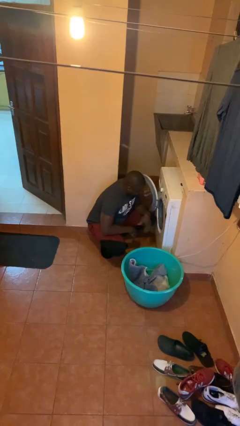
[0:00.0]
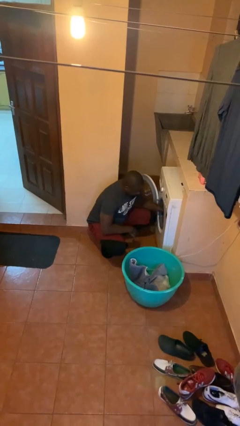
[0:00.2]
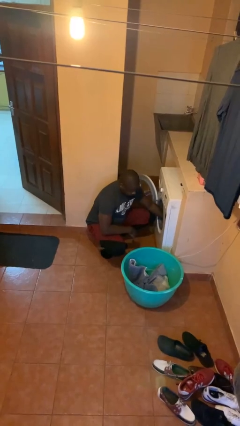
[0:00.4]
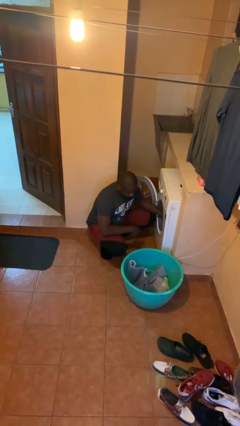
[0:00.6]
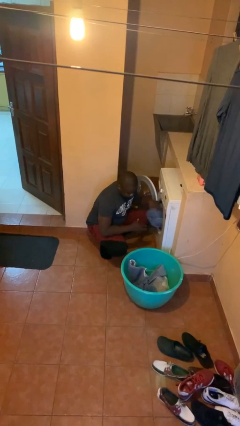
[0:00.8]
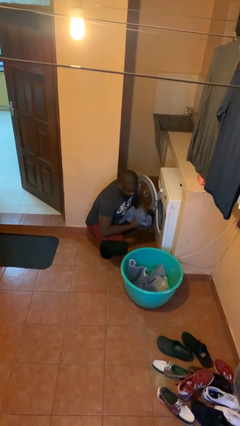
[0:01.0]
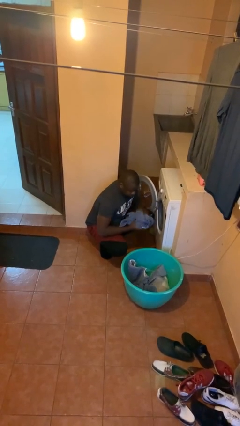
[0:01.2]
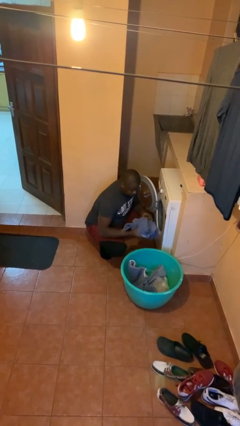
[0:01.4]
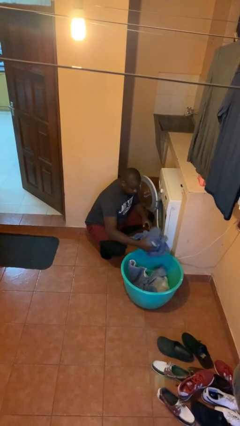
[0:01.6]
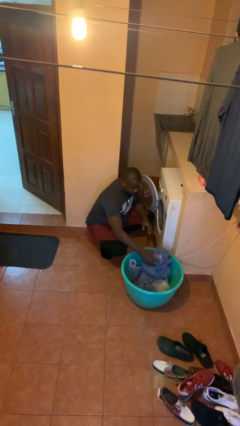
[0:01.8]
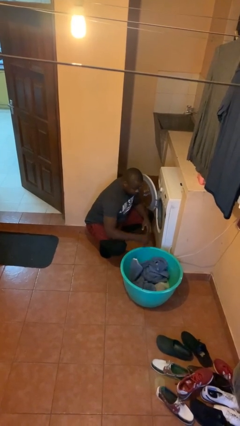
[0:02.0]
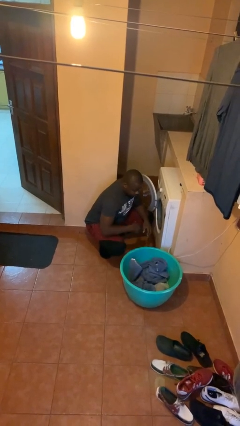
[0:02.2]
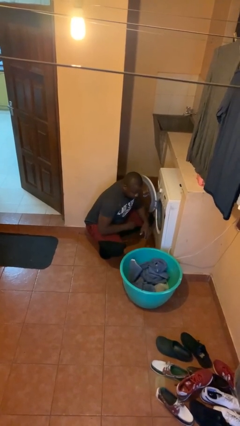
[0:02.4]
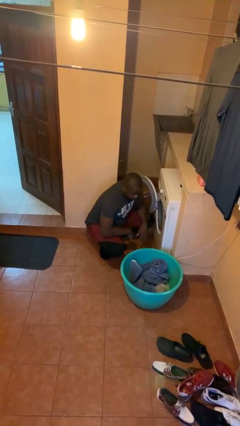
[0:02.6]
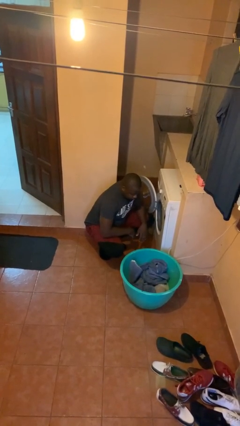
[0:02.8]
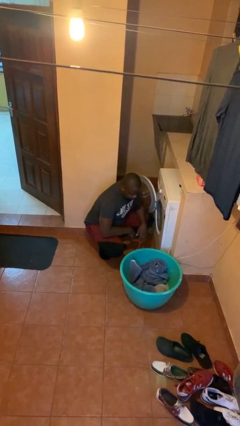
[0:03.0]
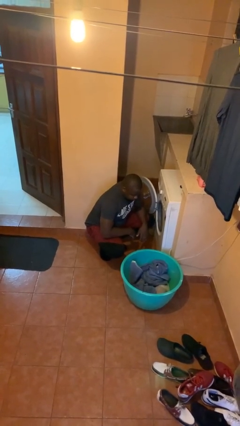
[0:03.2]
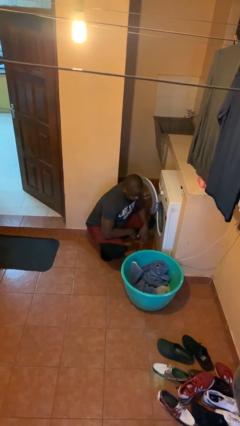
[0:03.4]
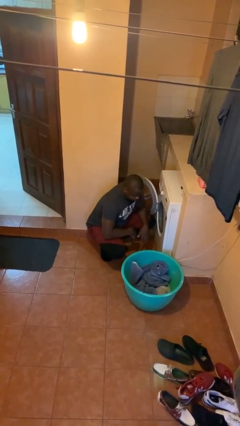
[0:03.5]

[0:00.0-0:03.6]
person unloads dryer

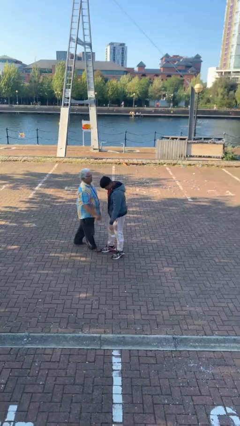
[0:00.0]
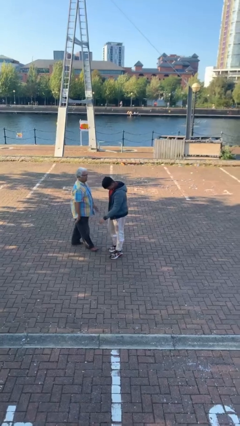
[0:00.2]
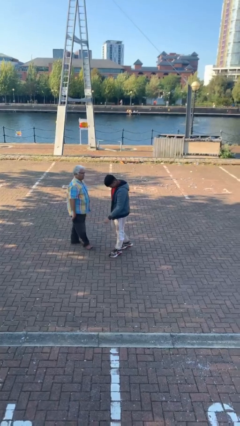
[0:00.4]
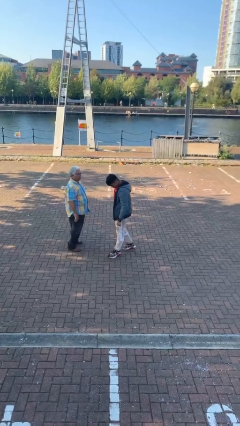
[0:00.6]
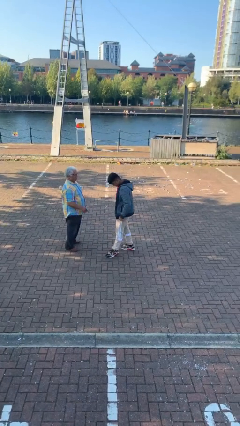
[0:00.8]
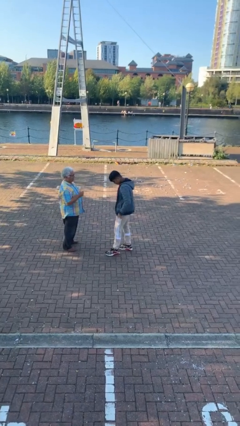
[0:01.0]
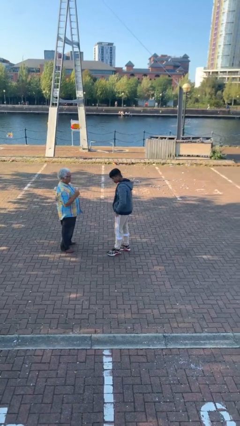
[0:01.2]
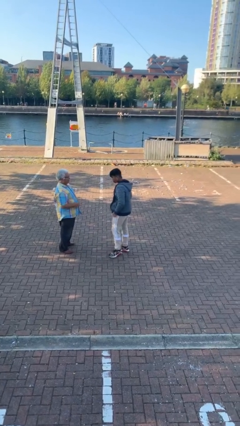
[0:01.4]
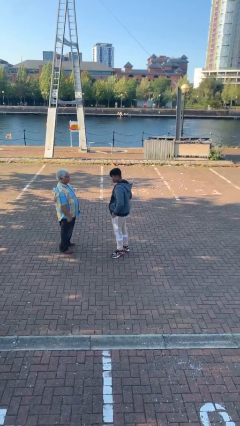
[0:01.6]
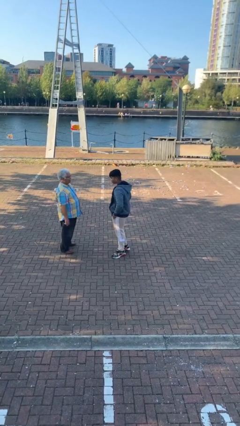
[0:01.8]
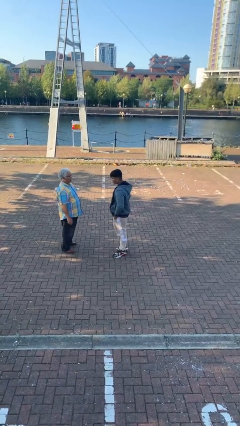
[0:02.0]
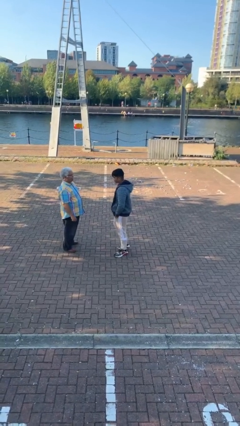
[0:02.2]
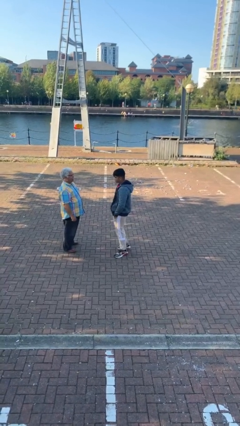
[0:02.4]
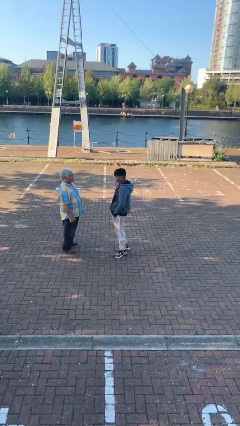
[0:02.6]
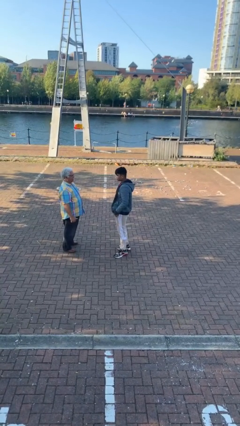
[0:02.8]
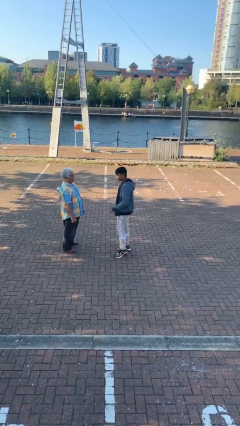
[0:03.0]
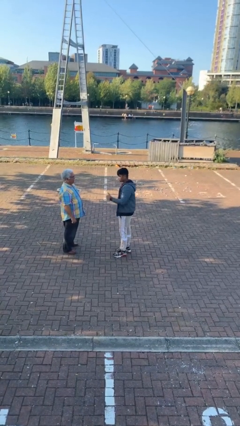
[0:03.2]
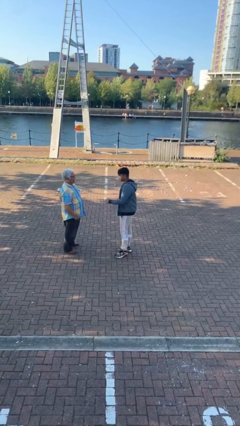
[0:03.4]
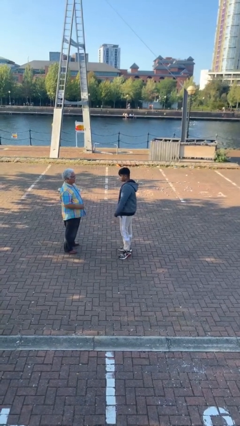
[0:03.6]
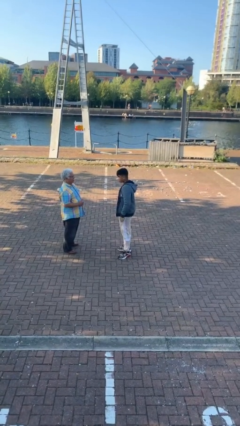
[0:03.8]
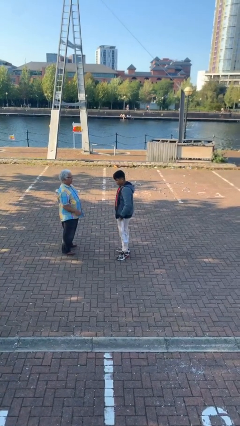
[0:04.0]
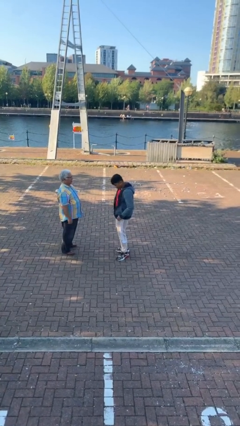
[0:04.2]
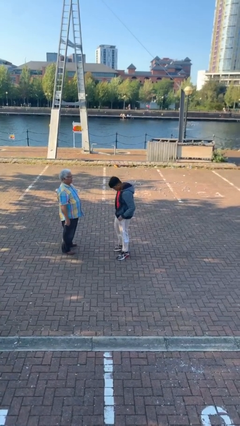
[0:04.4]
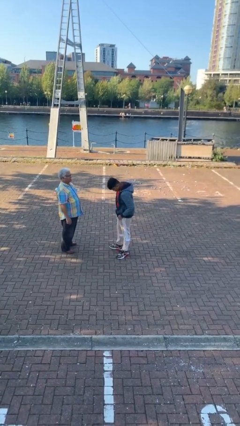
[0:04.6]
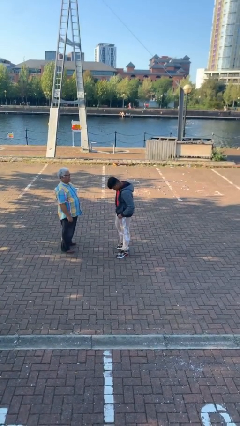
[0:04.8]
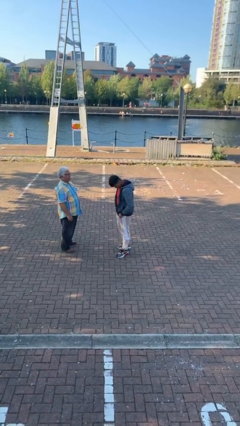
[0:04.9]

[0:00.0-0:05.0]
person talks to person

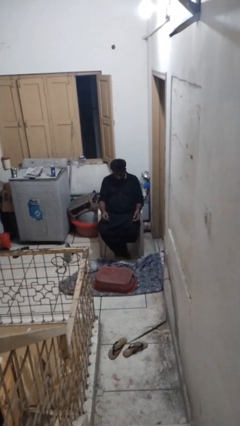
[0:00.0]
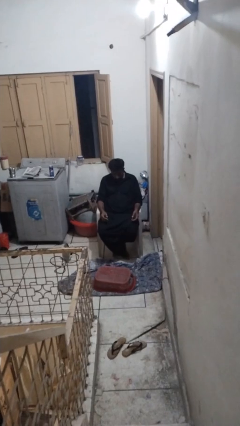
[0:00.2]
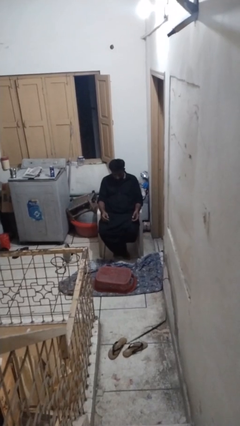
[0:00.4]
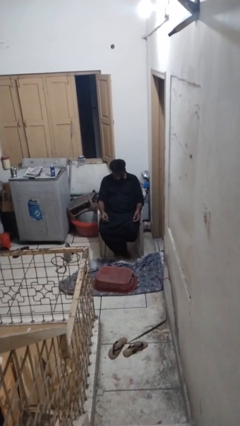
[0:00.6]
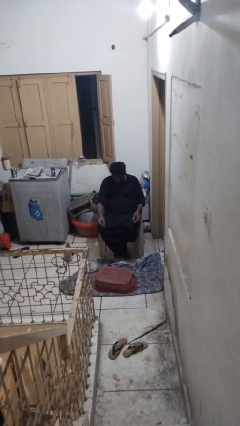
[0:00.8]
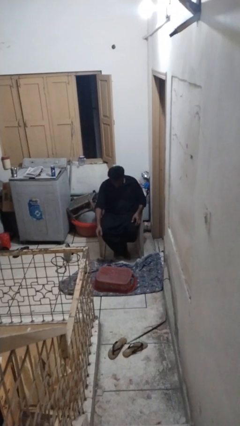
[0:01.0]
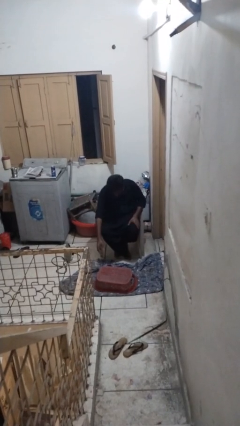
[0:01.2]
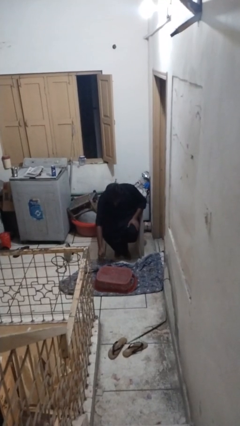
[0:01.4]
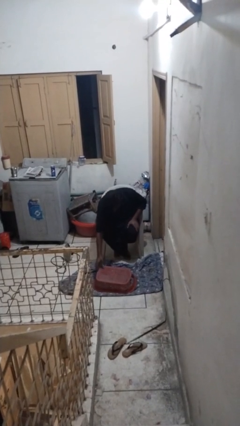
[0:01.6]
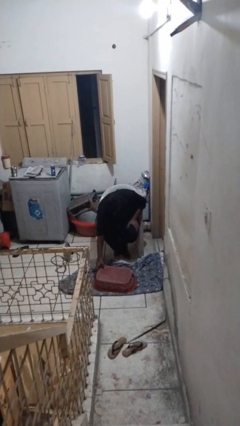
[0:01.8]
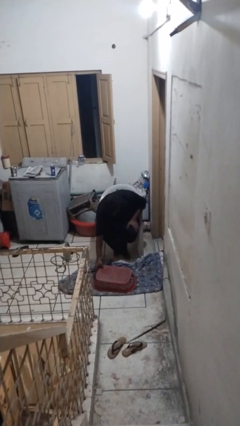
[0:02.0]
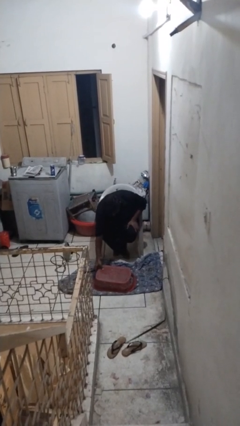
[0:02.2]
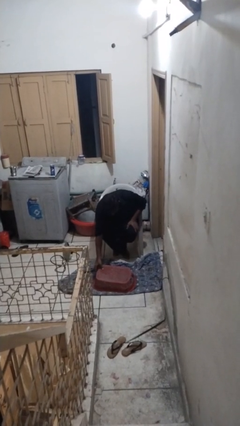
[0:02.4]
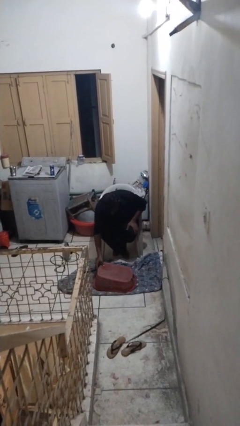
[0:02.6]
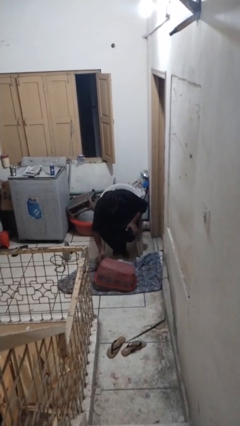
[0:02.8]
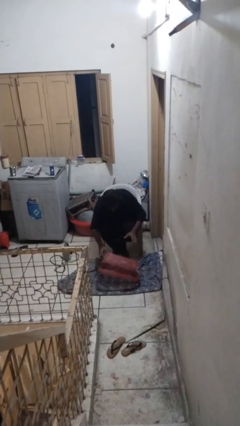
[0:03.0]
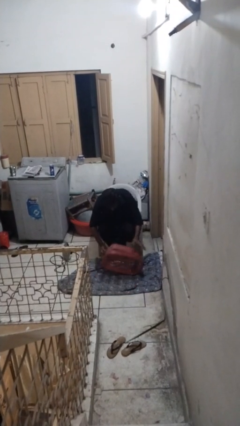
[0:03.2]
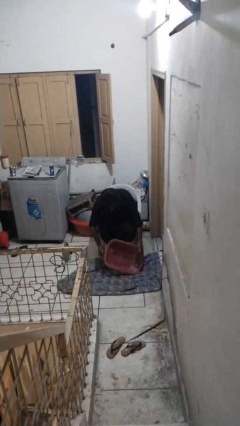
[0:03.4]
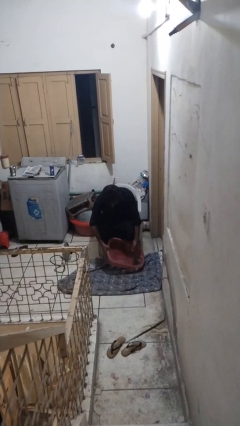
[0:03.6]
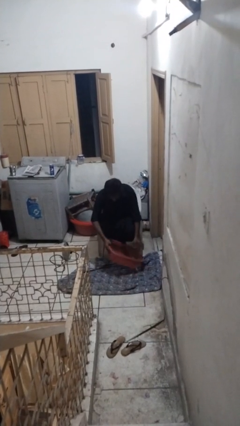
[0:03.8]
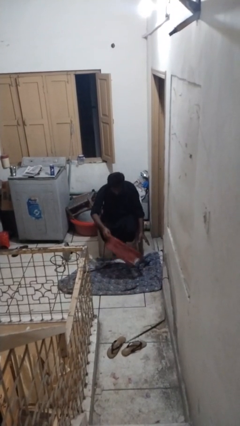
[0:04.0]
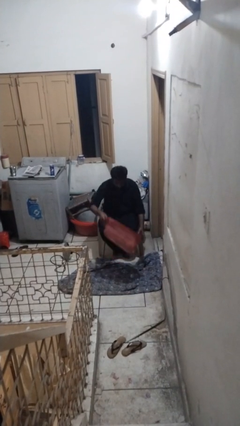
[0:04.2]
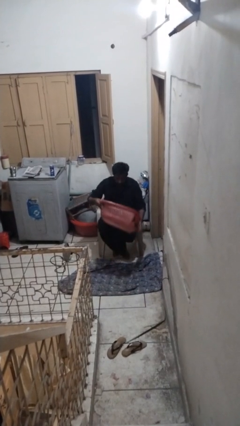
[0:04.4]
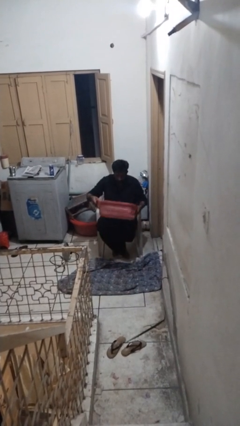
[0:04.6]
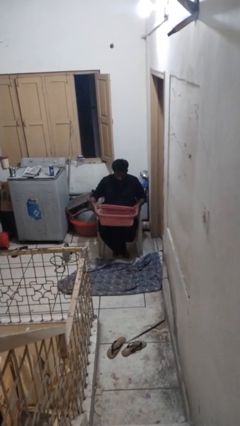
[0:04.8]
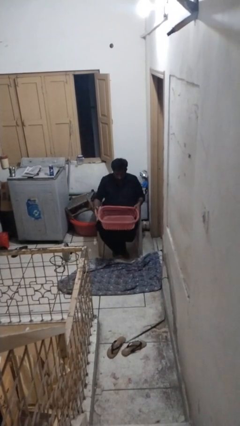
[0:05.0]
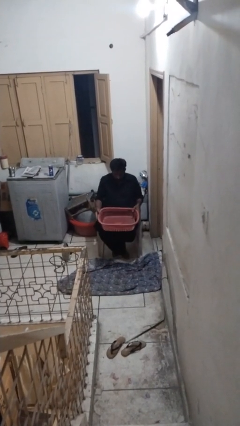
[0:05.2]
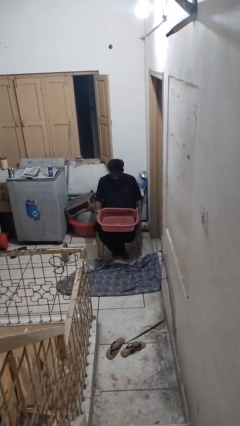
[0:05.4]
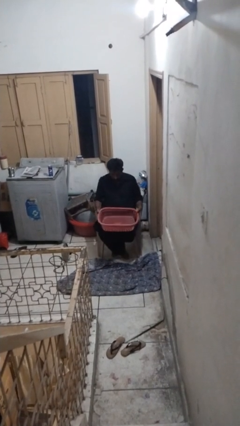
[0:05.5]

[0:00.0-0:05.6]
person picks up object from floor

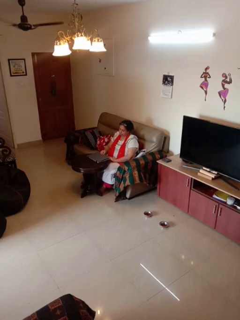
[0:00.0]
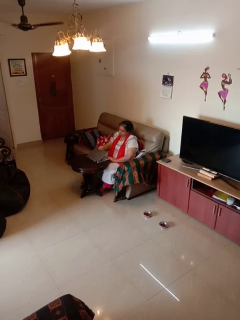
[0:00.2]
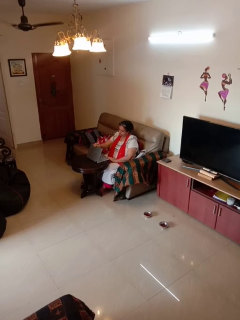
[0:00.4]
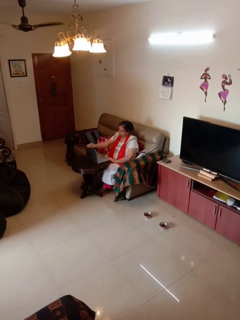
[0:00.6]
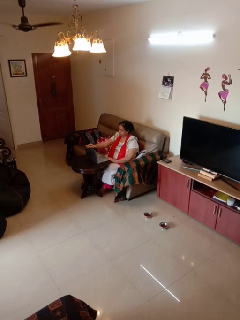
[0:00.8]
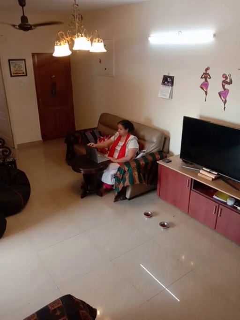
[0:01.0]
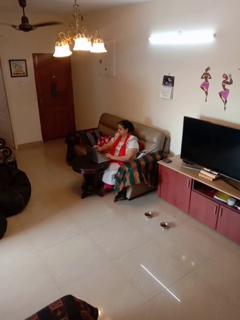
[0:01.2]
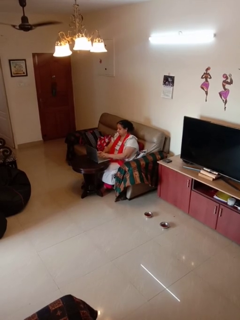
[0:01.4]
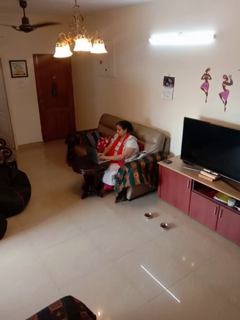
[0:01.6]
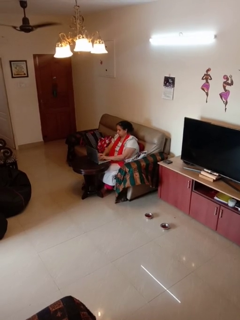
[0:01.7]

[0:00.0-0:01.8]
person opens laptop

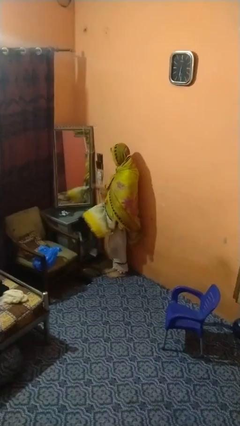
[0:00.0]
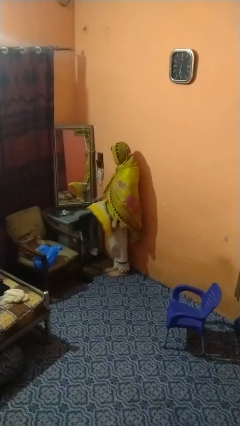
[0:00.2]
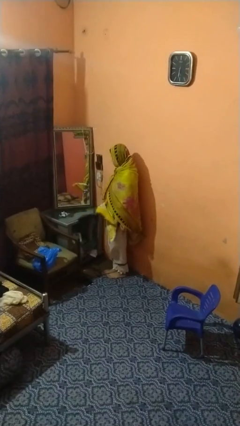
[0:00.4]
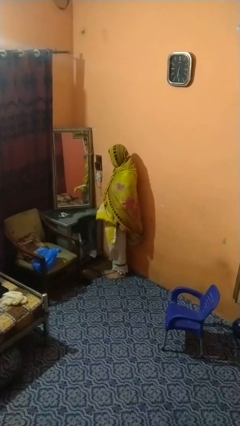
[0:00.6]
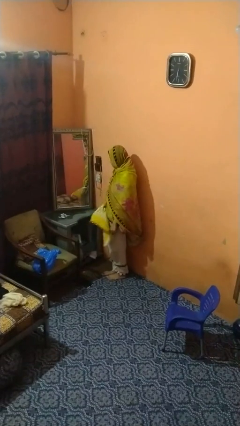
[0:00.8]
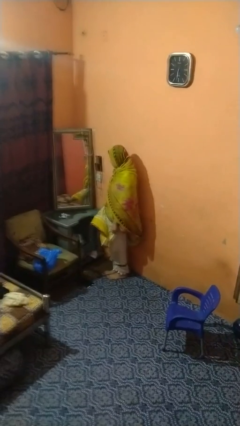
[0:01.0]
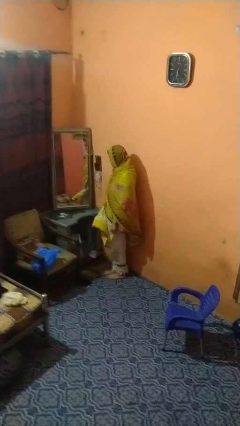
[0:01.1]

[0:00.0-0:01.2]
person unplugs from electrical socket

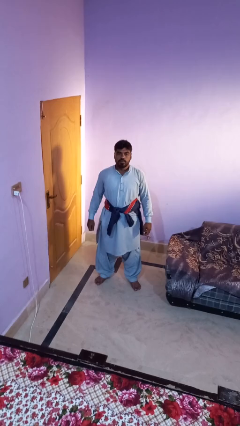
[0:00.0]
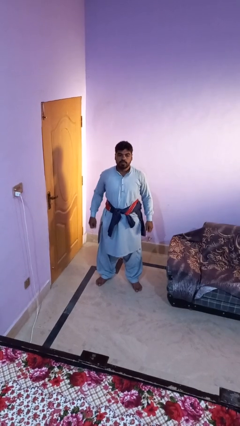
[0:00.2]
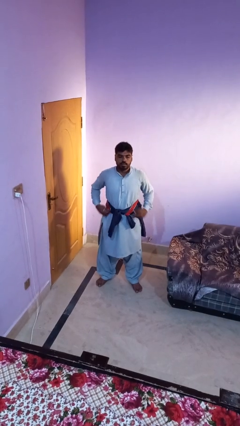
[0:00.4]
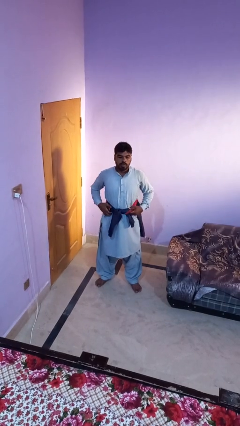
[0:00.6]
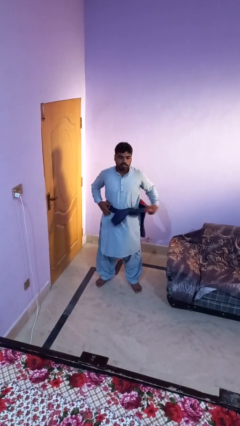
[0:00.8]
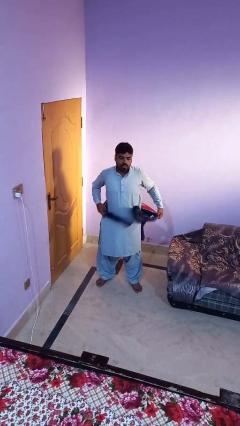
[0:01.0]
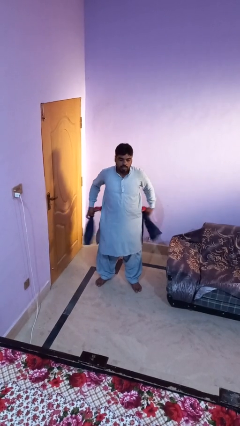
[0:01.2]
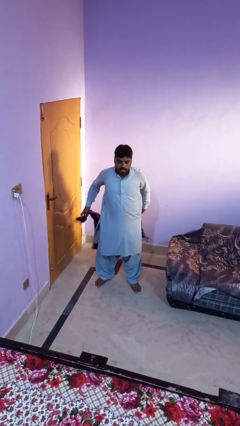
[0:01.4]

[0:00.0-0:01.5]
person unties jacket around waist
